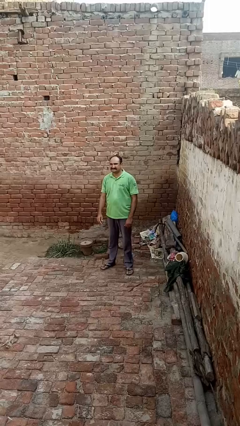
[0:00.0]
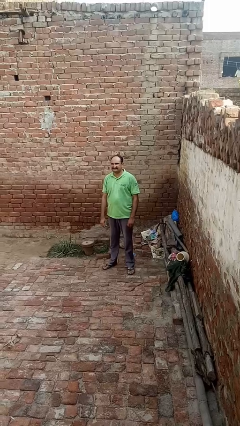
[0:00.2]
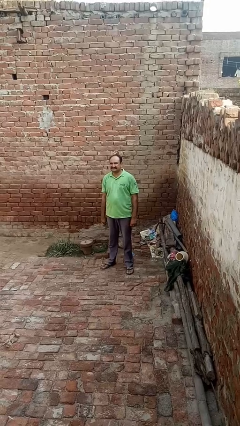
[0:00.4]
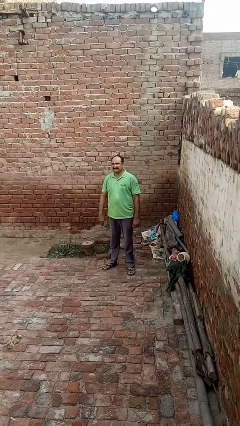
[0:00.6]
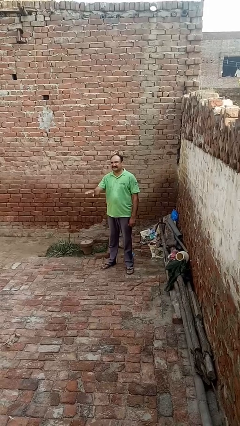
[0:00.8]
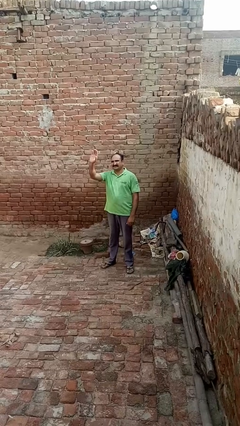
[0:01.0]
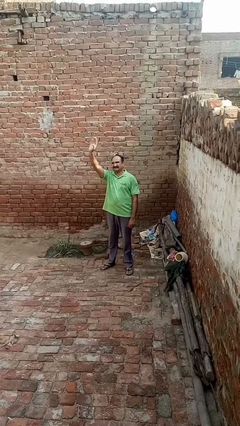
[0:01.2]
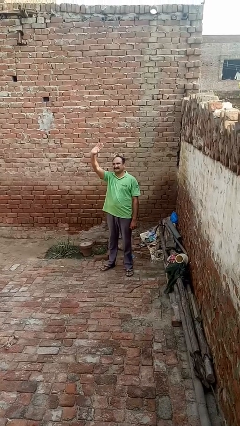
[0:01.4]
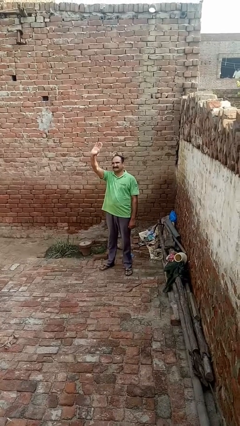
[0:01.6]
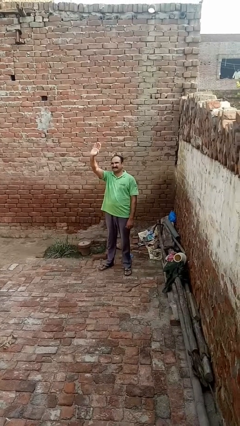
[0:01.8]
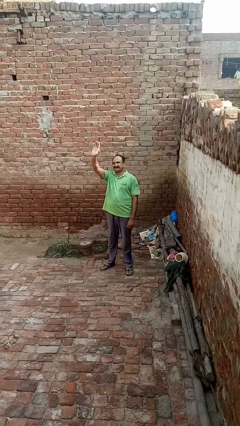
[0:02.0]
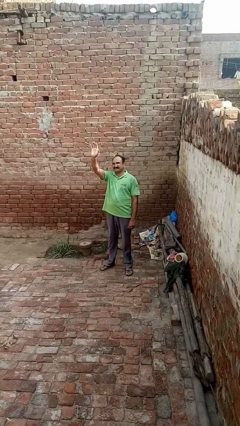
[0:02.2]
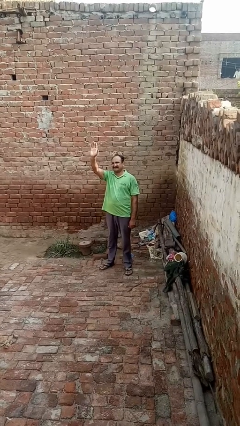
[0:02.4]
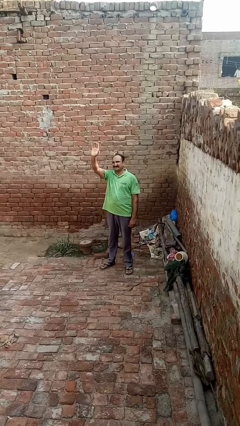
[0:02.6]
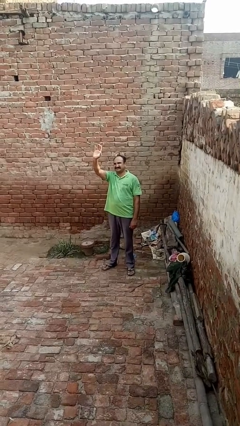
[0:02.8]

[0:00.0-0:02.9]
person waves at person

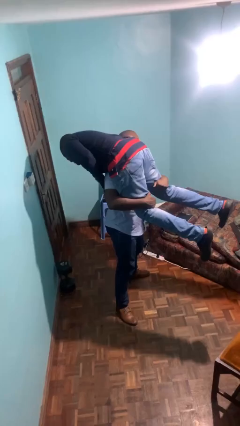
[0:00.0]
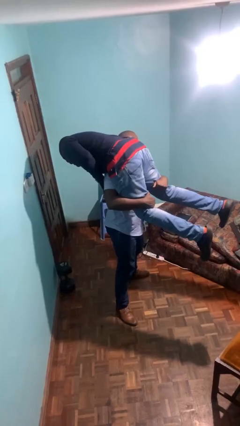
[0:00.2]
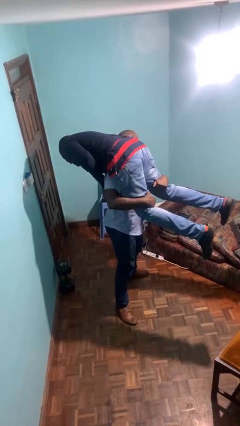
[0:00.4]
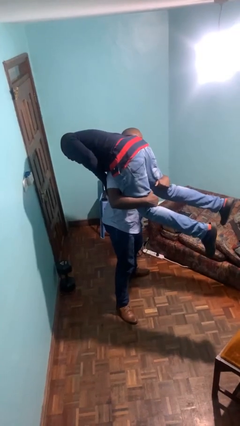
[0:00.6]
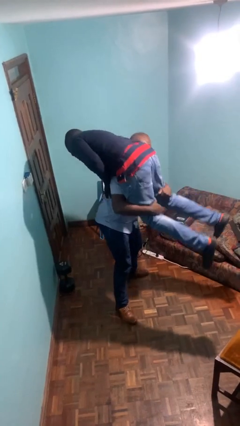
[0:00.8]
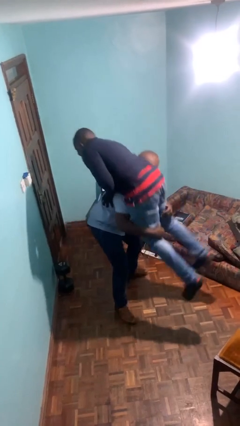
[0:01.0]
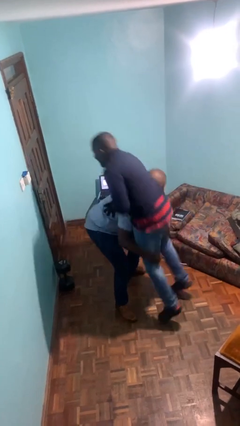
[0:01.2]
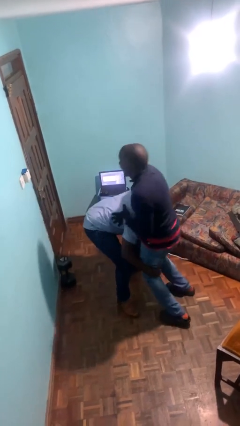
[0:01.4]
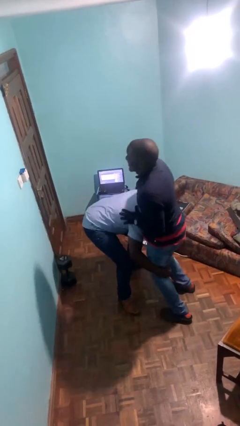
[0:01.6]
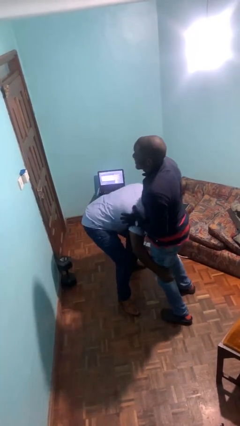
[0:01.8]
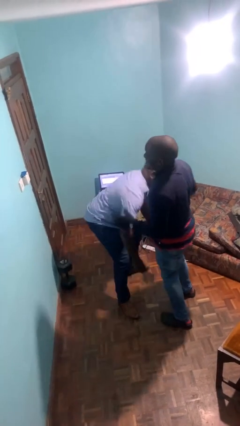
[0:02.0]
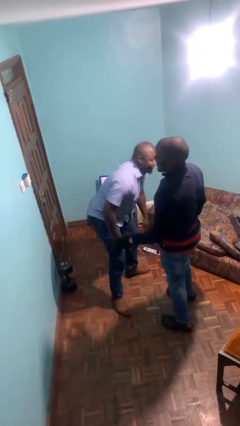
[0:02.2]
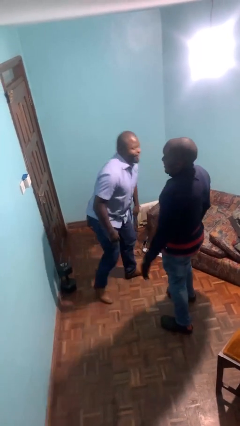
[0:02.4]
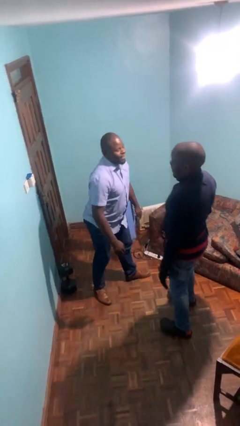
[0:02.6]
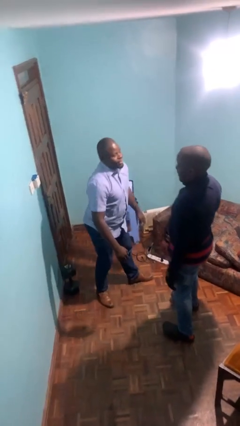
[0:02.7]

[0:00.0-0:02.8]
person puts down person

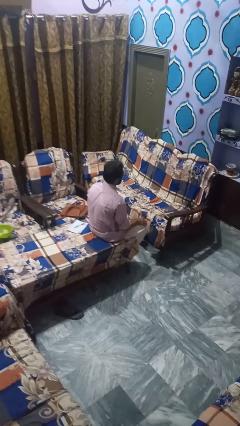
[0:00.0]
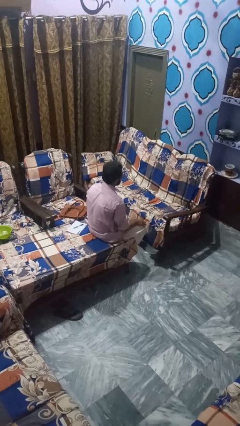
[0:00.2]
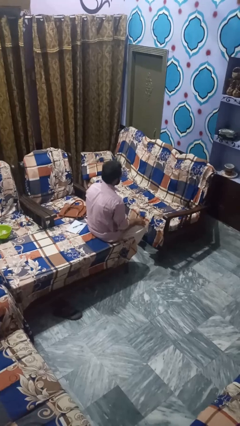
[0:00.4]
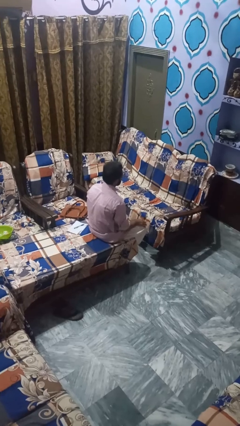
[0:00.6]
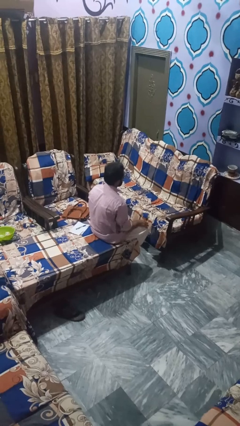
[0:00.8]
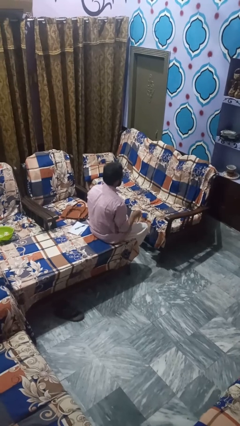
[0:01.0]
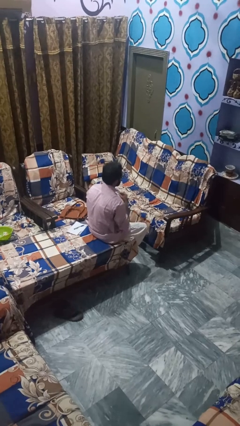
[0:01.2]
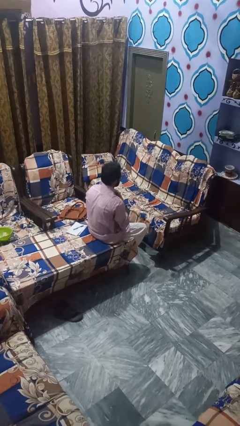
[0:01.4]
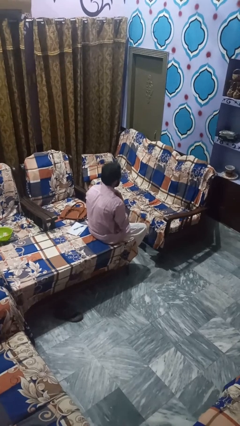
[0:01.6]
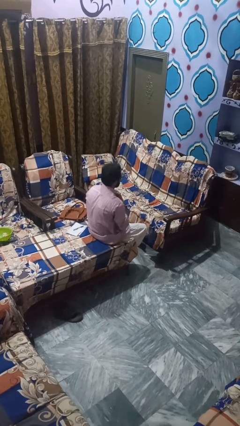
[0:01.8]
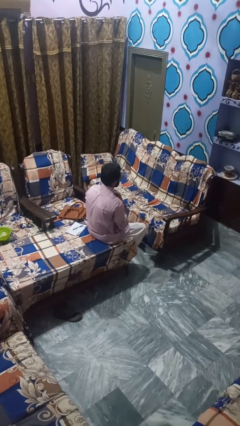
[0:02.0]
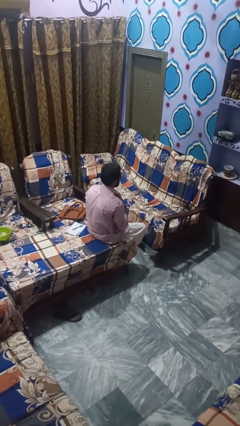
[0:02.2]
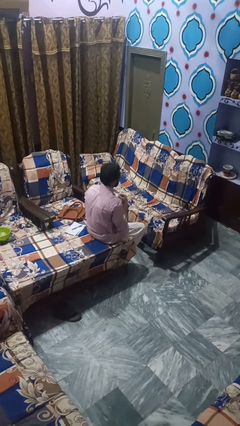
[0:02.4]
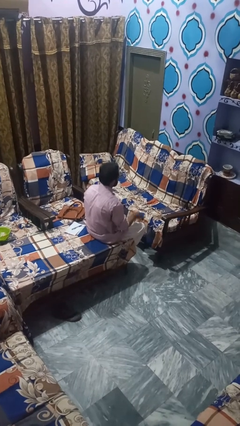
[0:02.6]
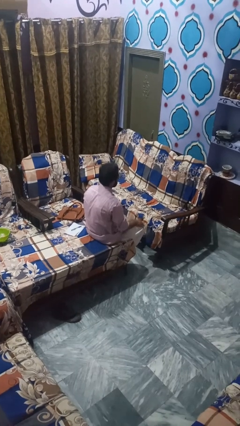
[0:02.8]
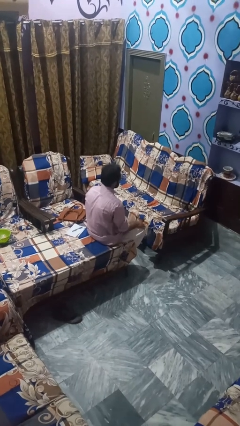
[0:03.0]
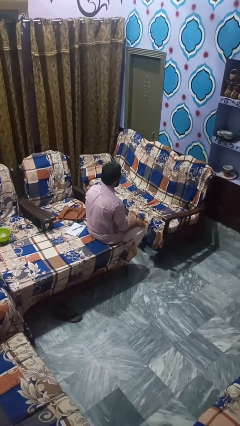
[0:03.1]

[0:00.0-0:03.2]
person buttons shirt

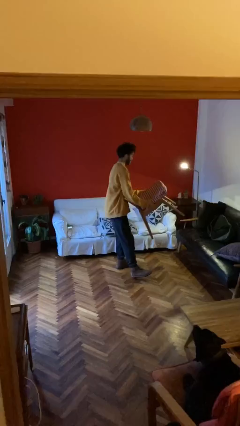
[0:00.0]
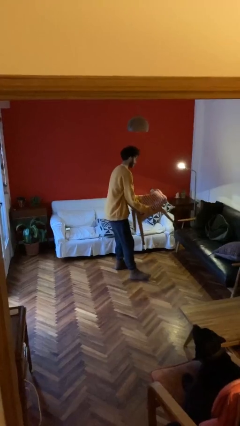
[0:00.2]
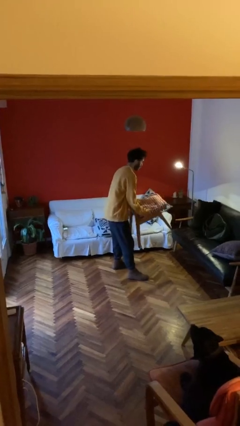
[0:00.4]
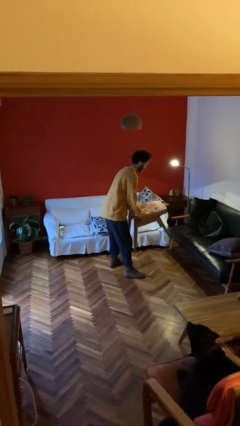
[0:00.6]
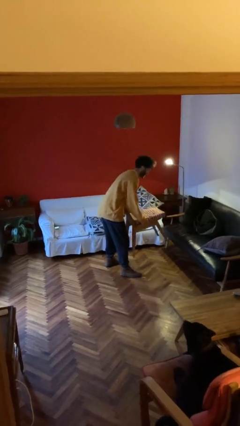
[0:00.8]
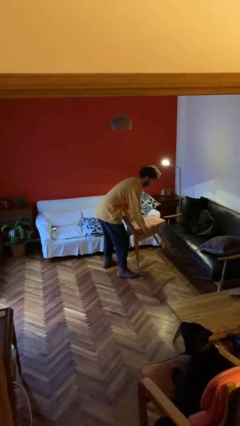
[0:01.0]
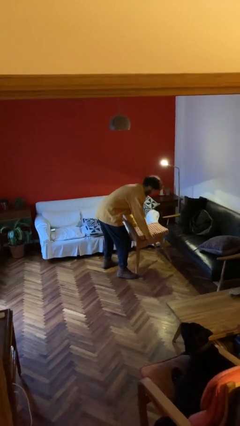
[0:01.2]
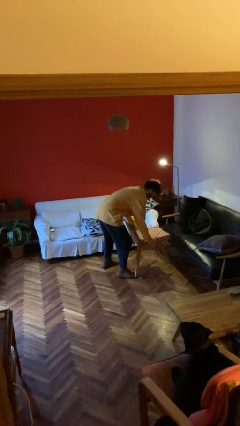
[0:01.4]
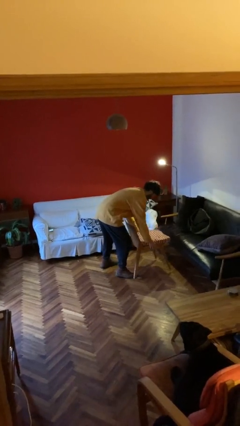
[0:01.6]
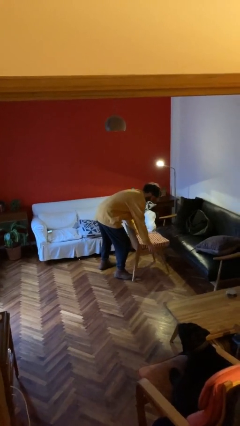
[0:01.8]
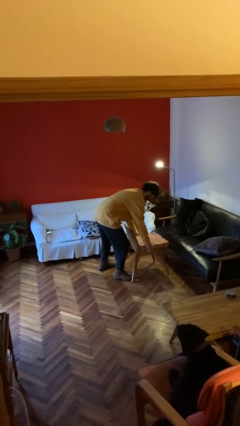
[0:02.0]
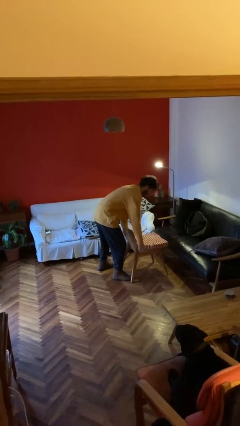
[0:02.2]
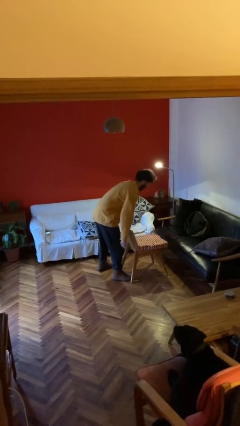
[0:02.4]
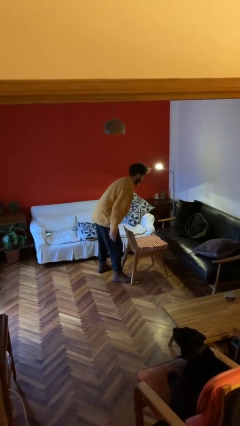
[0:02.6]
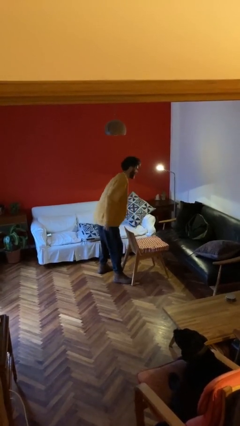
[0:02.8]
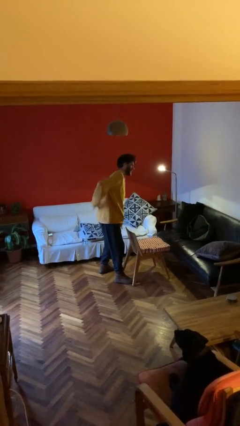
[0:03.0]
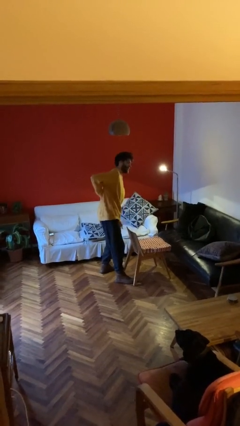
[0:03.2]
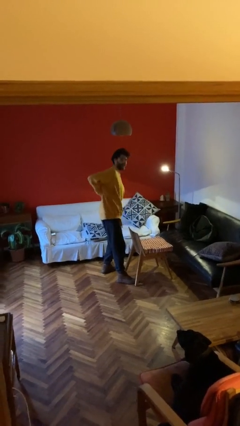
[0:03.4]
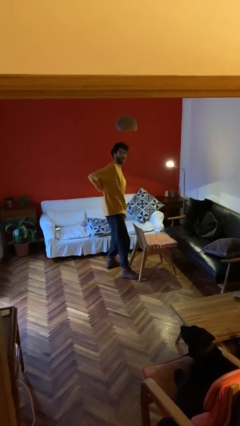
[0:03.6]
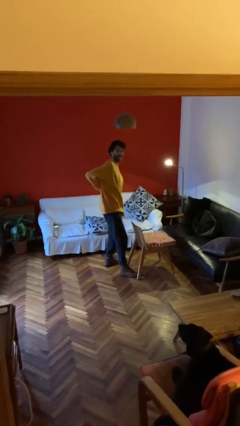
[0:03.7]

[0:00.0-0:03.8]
person puts down object on floor

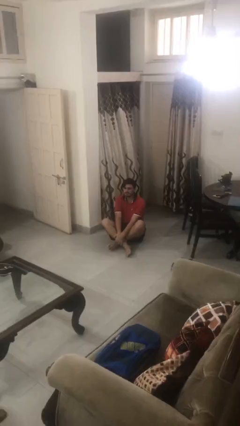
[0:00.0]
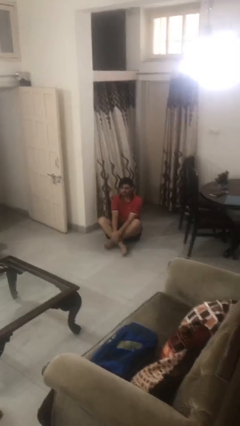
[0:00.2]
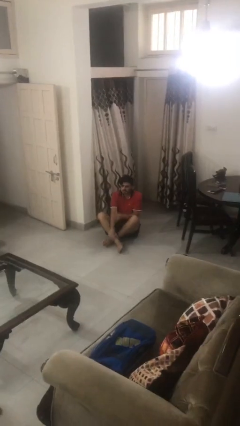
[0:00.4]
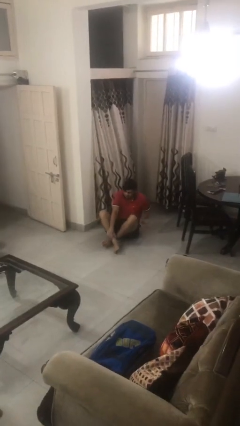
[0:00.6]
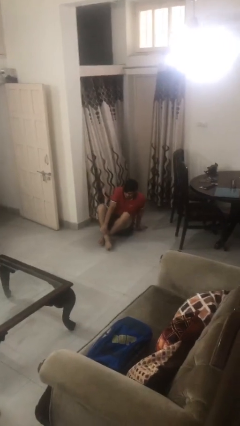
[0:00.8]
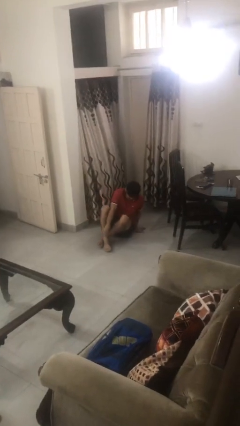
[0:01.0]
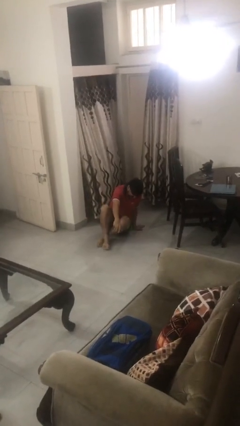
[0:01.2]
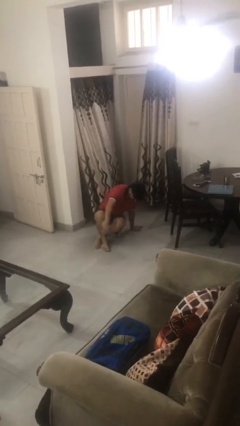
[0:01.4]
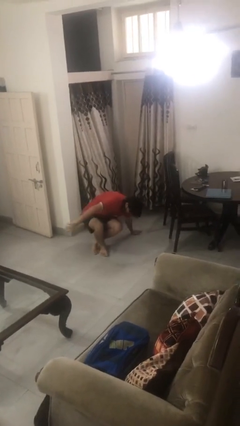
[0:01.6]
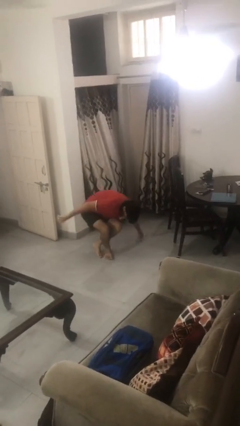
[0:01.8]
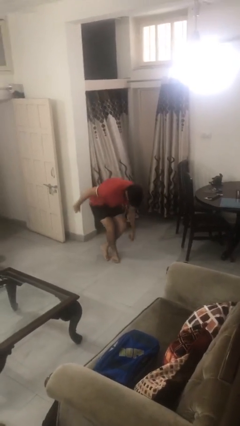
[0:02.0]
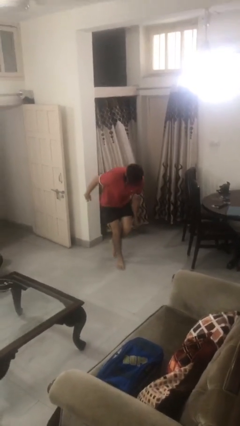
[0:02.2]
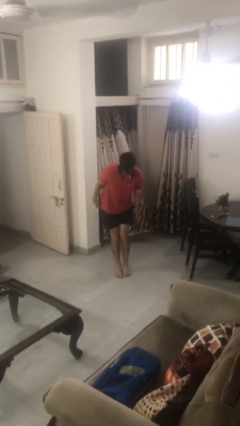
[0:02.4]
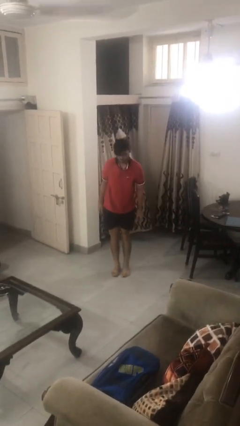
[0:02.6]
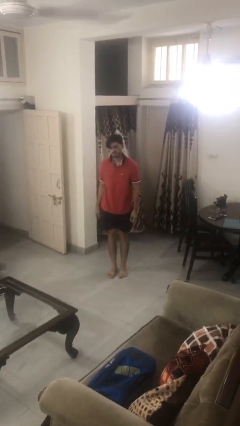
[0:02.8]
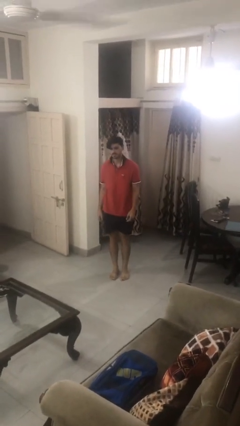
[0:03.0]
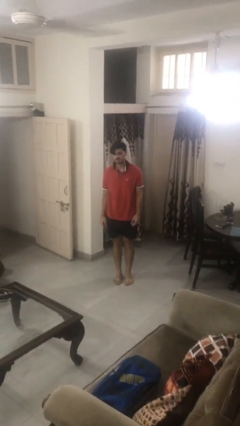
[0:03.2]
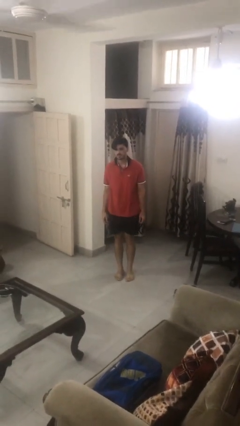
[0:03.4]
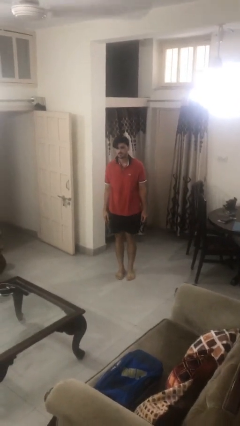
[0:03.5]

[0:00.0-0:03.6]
person stands up from floor

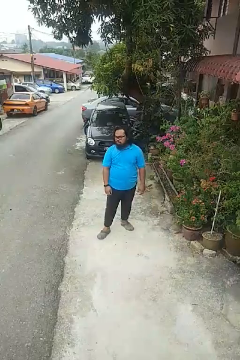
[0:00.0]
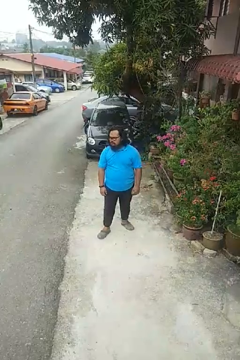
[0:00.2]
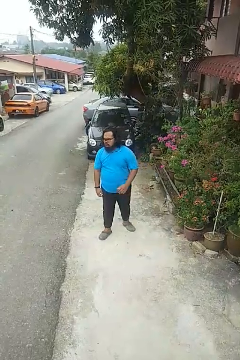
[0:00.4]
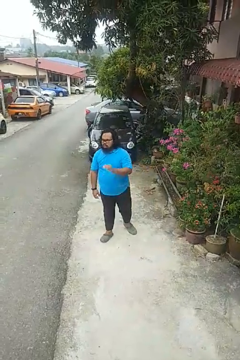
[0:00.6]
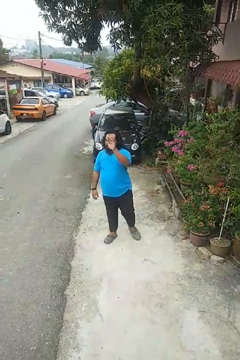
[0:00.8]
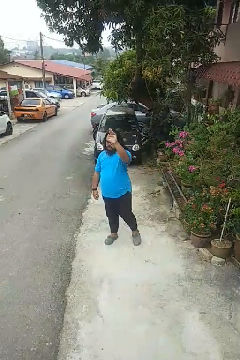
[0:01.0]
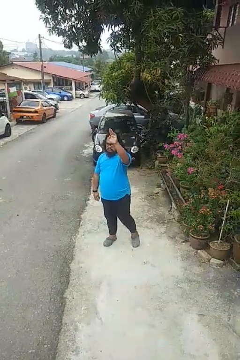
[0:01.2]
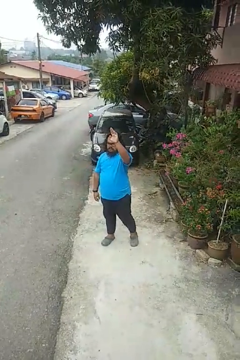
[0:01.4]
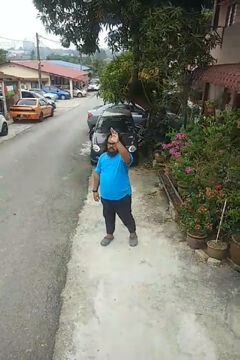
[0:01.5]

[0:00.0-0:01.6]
person gestures raise hand

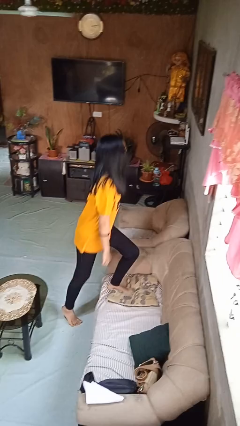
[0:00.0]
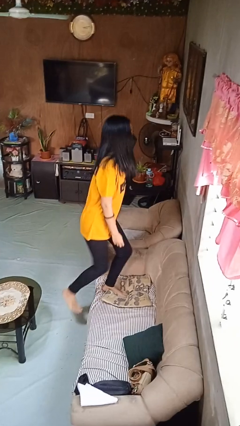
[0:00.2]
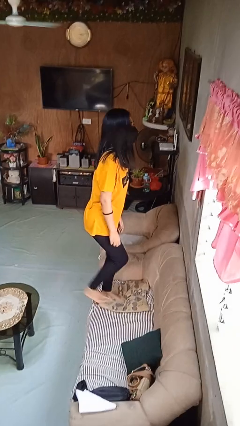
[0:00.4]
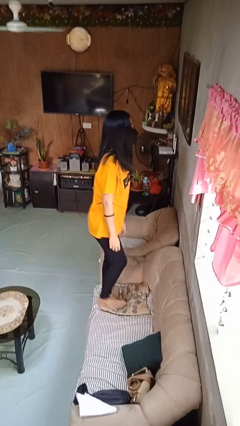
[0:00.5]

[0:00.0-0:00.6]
person climbs on couch
